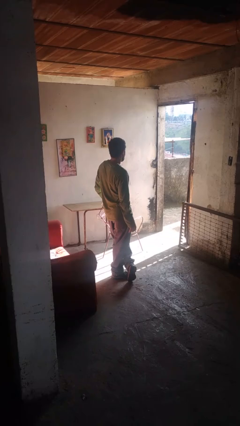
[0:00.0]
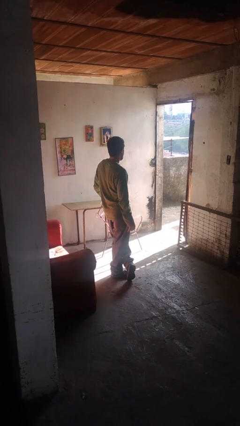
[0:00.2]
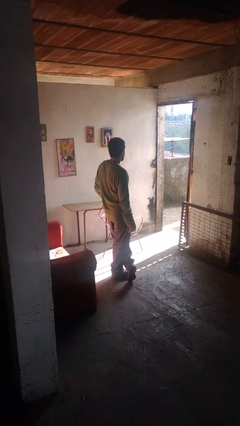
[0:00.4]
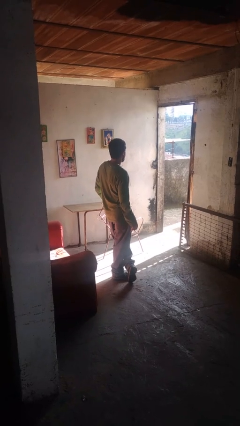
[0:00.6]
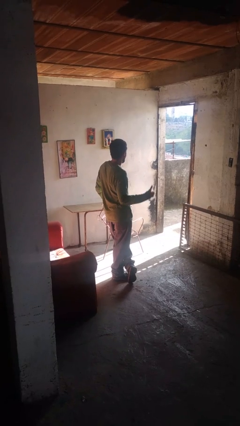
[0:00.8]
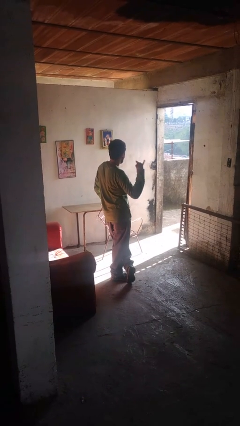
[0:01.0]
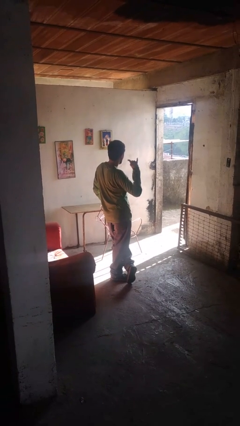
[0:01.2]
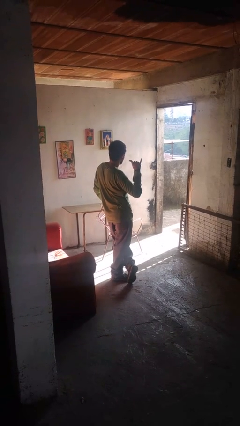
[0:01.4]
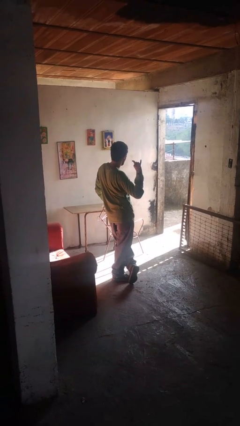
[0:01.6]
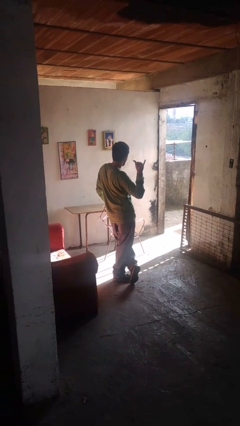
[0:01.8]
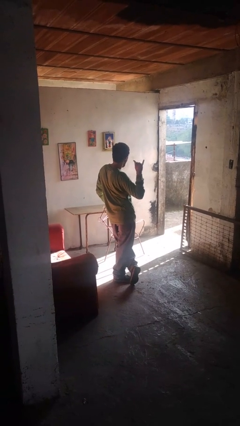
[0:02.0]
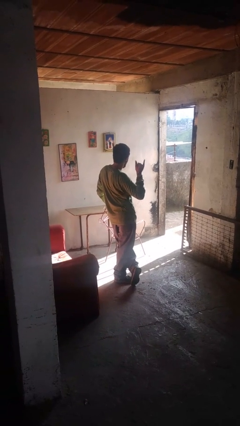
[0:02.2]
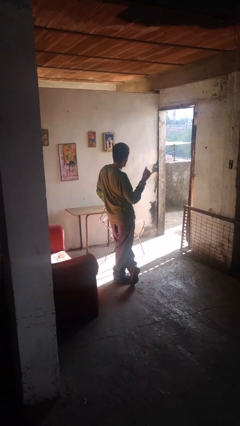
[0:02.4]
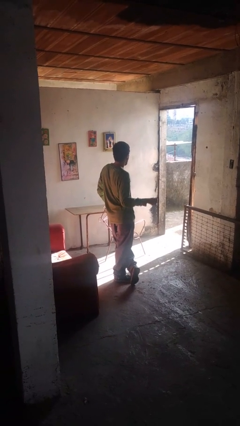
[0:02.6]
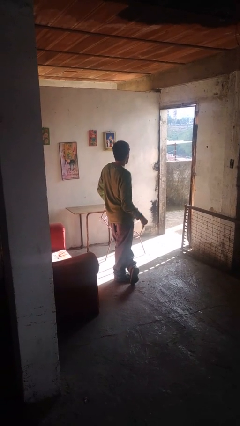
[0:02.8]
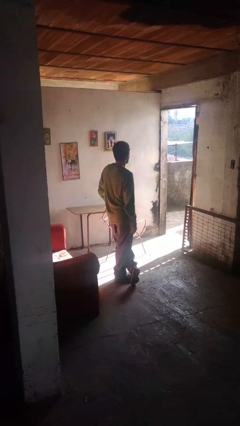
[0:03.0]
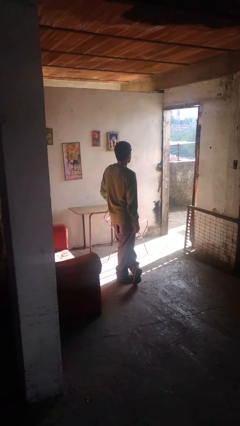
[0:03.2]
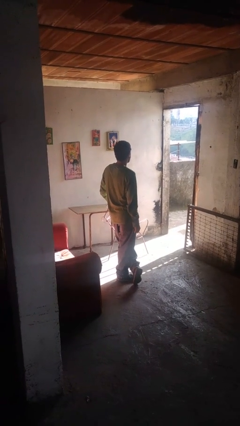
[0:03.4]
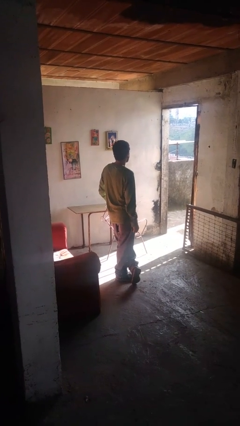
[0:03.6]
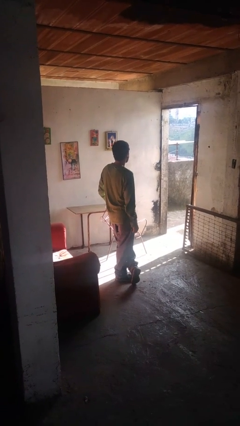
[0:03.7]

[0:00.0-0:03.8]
person gestures hang loose

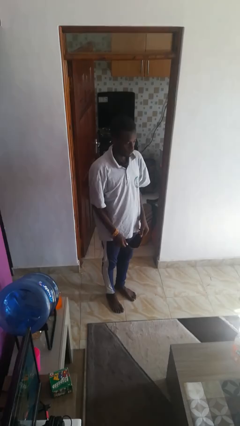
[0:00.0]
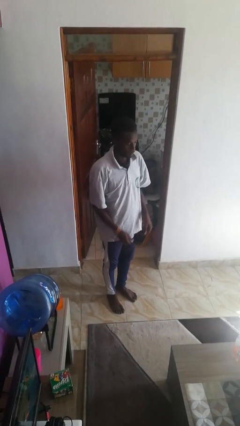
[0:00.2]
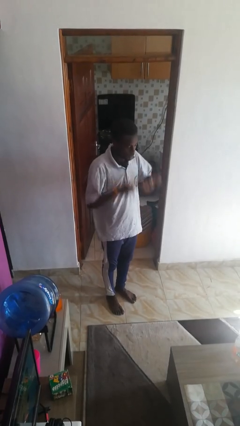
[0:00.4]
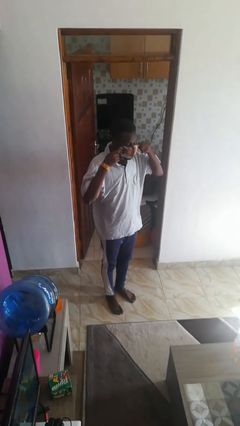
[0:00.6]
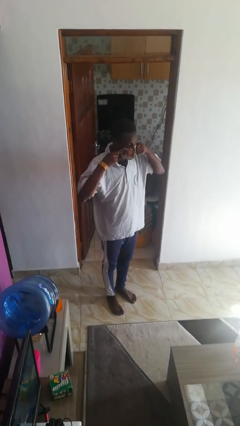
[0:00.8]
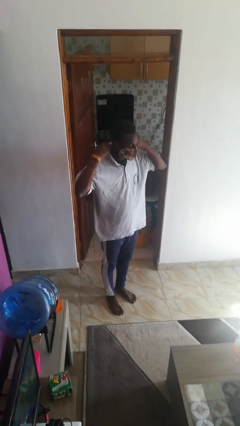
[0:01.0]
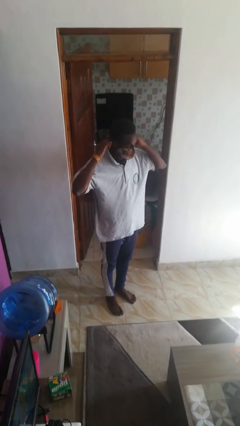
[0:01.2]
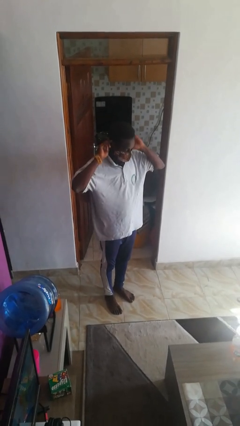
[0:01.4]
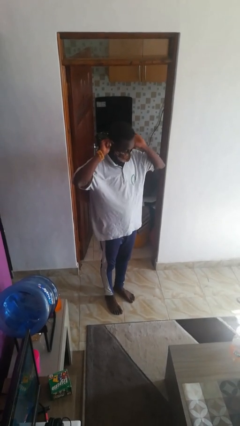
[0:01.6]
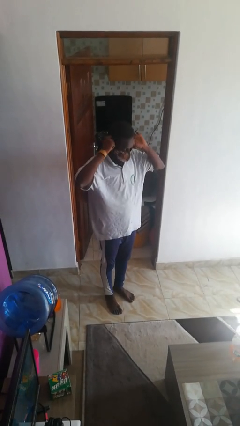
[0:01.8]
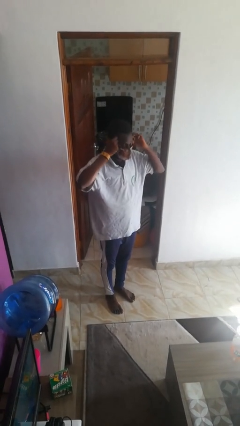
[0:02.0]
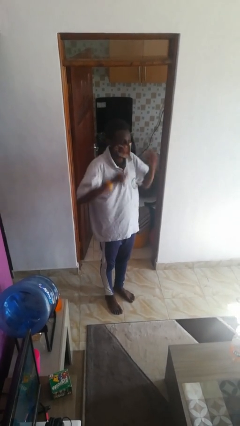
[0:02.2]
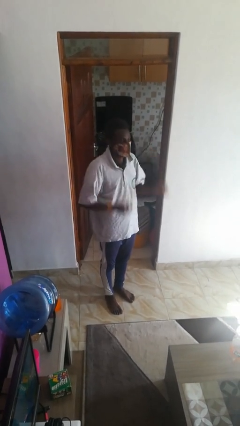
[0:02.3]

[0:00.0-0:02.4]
person puts on facemask

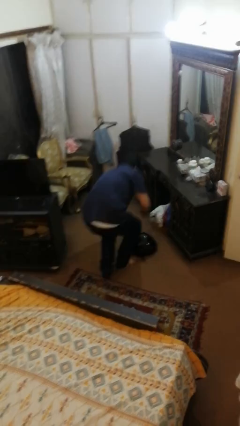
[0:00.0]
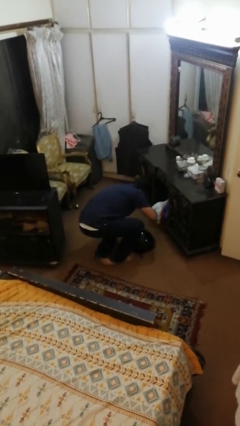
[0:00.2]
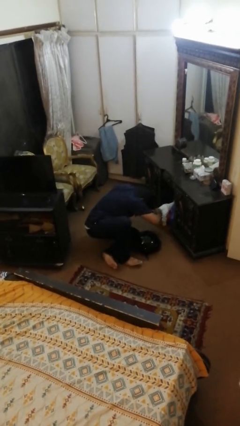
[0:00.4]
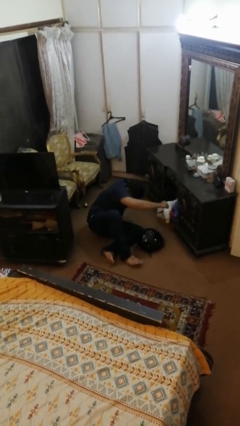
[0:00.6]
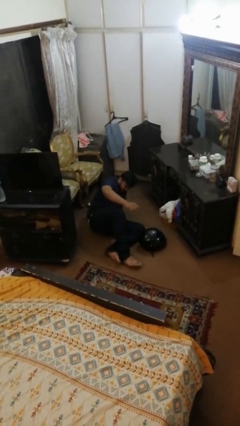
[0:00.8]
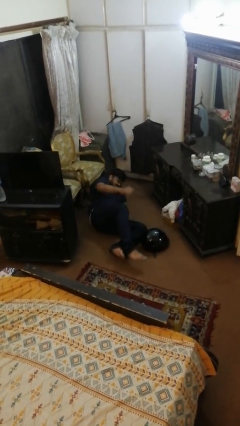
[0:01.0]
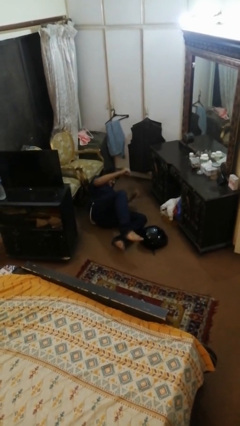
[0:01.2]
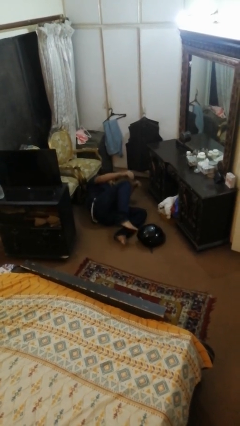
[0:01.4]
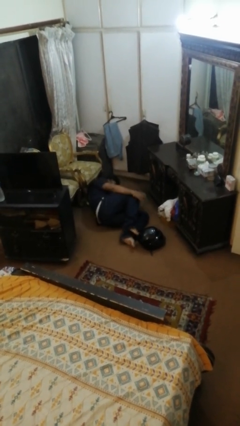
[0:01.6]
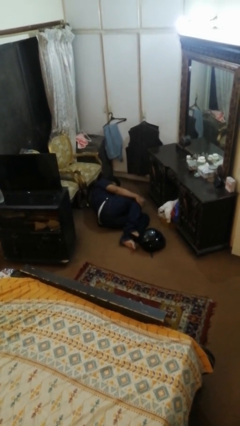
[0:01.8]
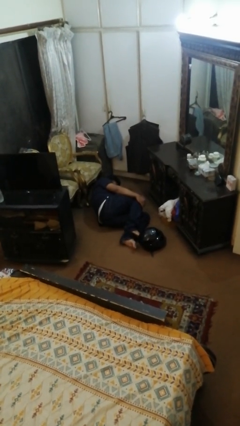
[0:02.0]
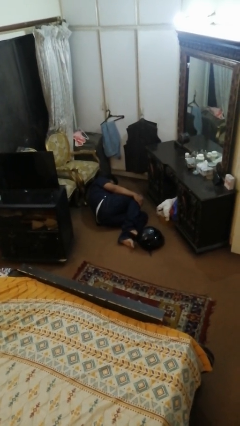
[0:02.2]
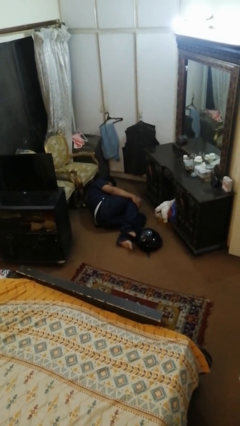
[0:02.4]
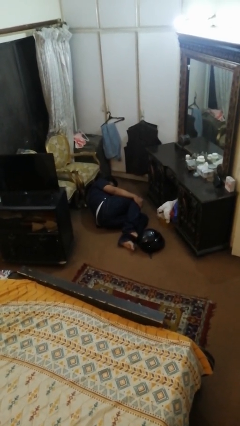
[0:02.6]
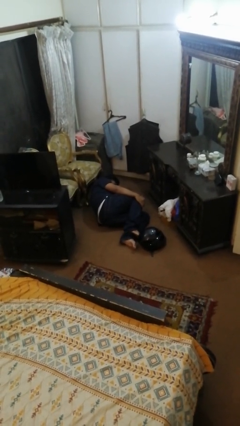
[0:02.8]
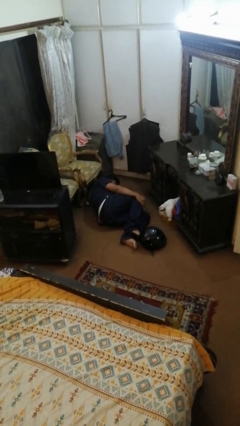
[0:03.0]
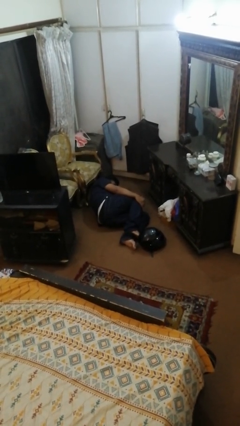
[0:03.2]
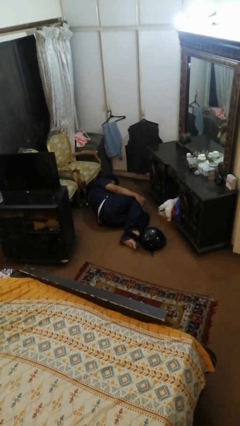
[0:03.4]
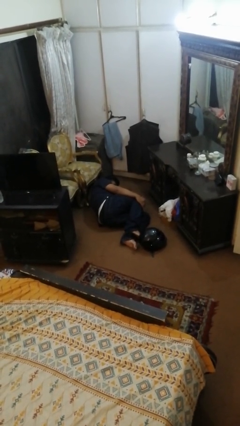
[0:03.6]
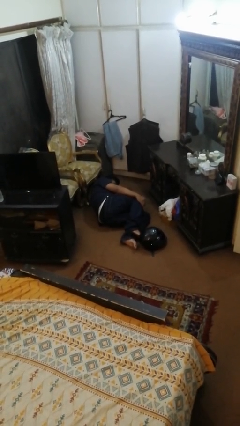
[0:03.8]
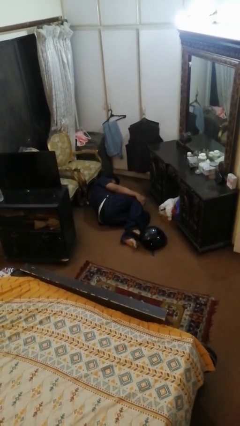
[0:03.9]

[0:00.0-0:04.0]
person lies down on floor

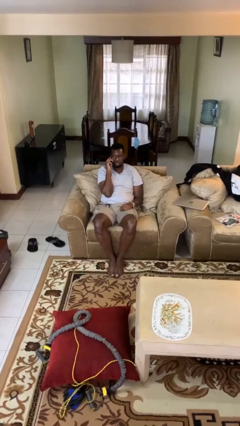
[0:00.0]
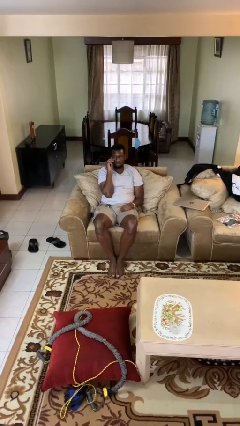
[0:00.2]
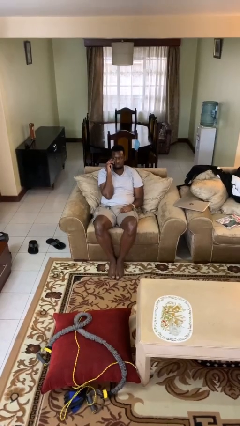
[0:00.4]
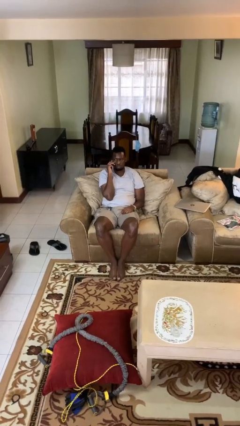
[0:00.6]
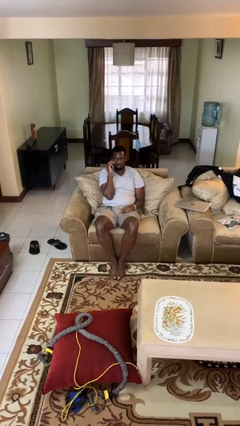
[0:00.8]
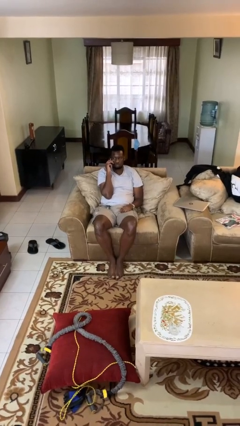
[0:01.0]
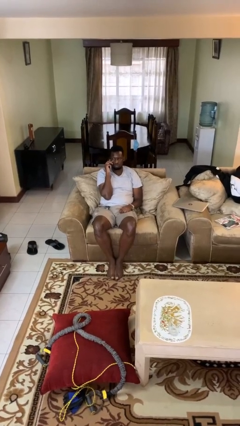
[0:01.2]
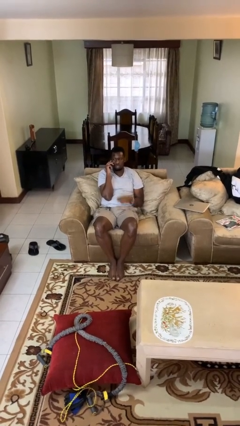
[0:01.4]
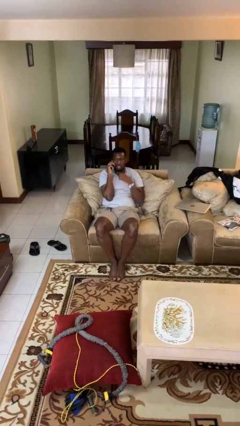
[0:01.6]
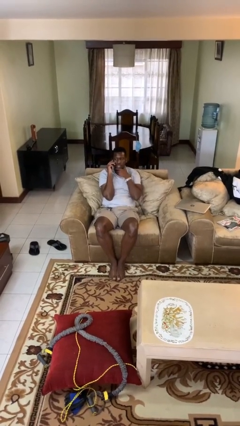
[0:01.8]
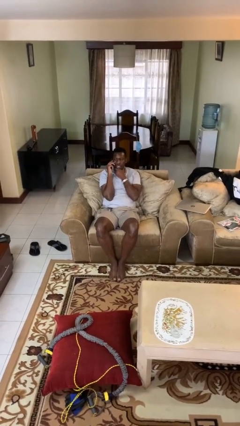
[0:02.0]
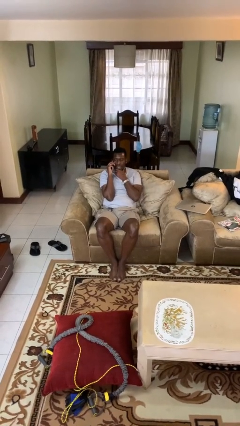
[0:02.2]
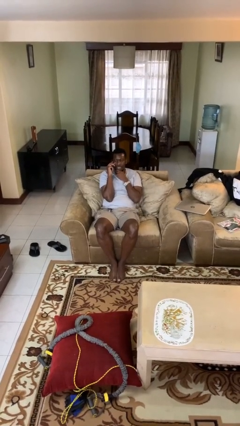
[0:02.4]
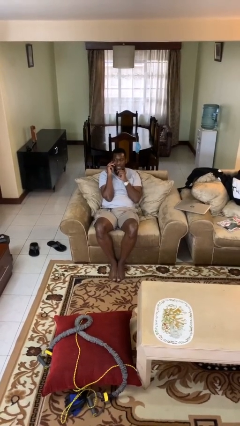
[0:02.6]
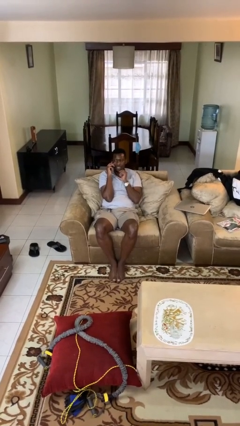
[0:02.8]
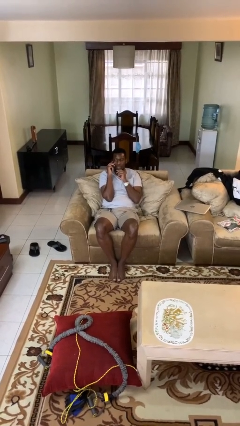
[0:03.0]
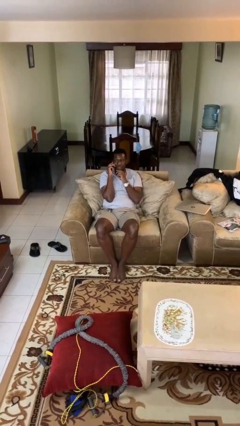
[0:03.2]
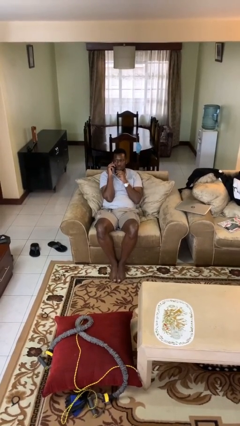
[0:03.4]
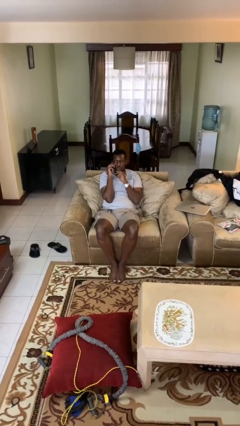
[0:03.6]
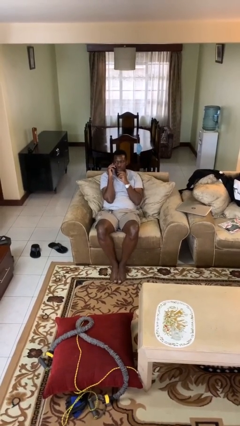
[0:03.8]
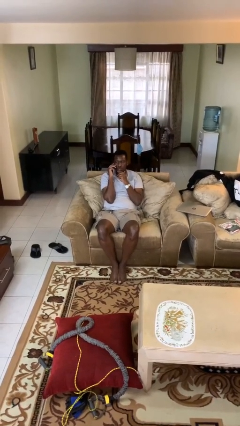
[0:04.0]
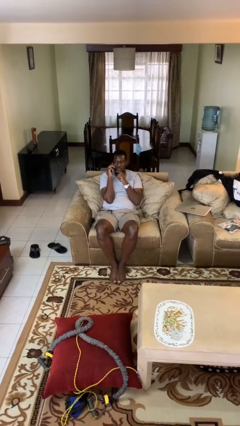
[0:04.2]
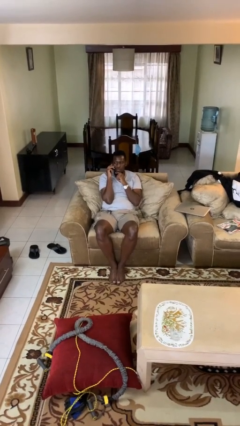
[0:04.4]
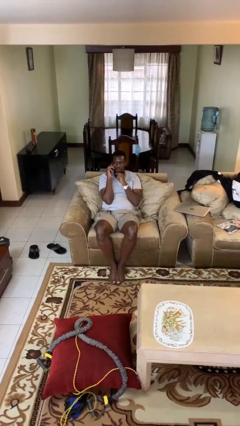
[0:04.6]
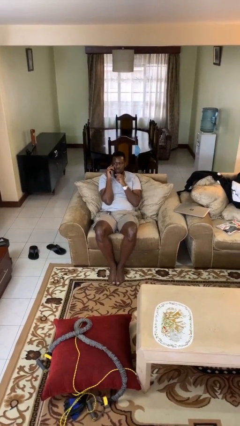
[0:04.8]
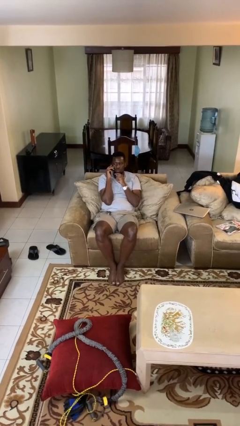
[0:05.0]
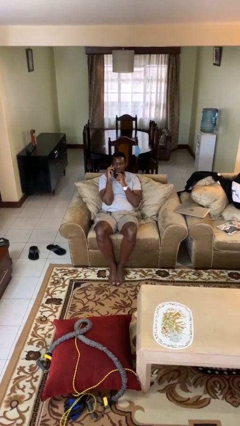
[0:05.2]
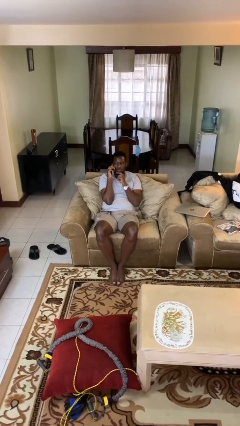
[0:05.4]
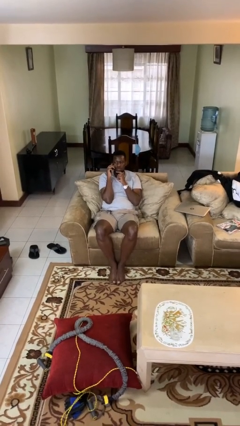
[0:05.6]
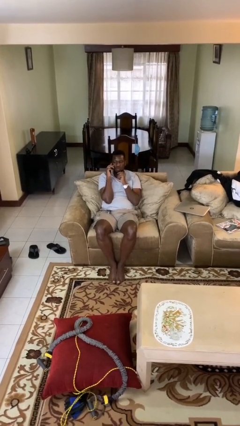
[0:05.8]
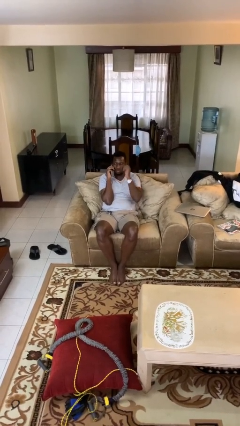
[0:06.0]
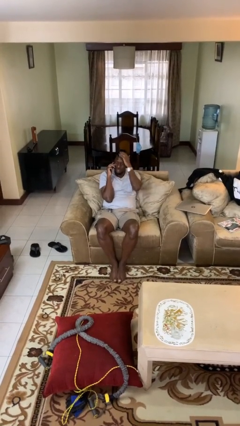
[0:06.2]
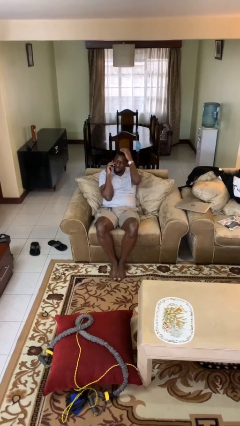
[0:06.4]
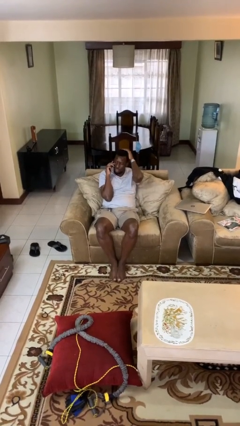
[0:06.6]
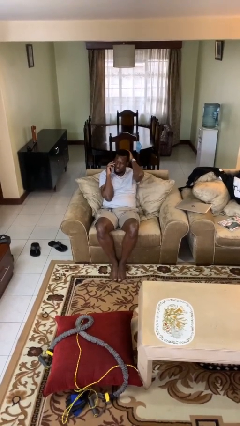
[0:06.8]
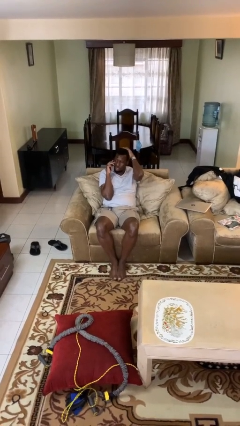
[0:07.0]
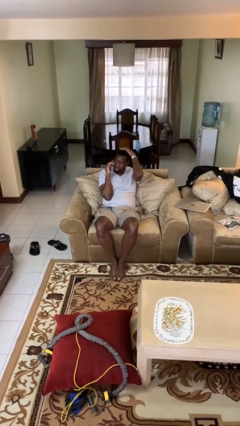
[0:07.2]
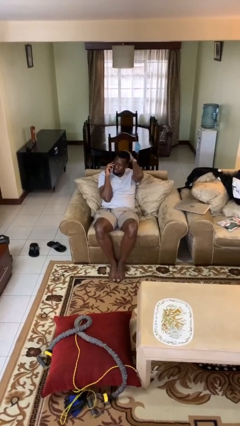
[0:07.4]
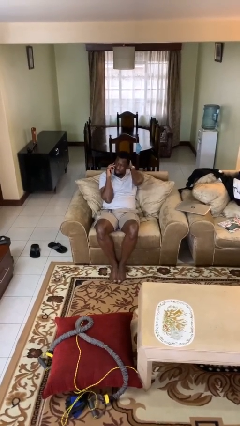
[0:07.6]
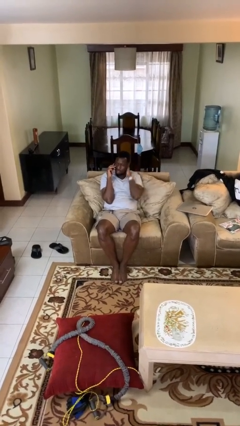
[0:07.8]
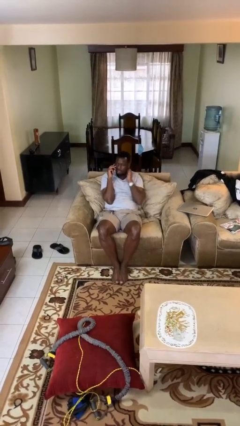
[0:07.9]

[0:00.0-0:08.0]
person talks on phone
